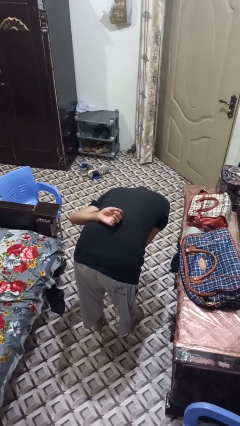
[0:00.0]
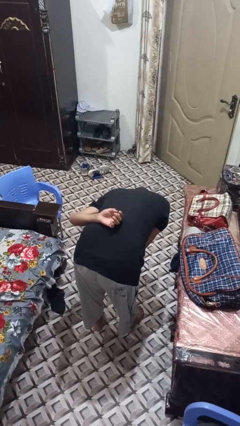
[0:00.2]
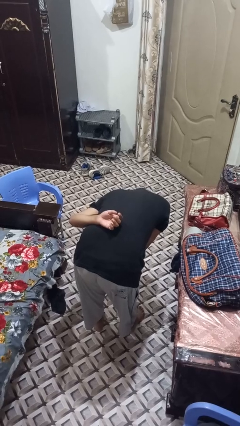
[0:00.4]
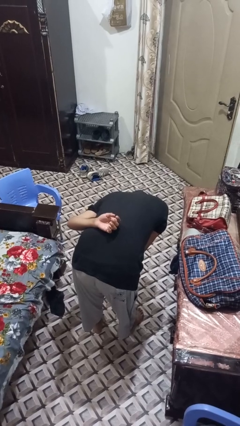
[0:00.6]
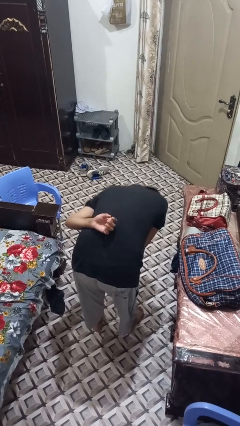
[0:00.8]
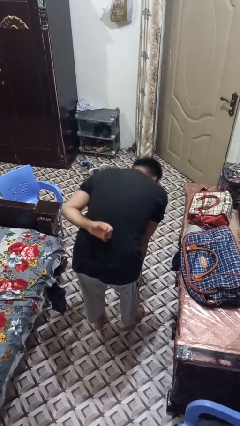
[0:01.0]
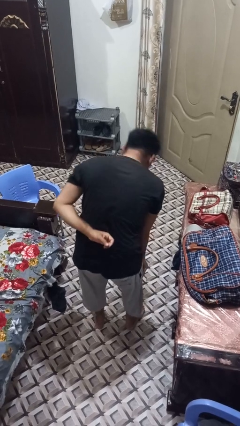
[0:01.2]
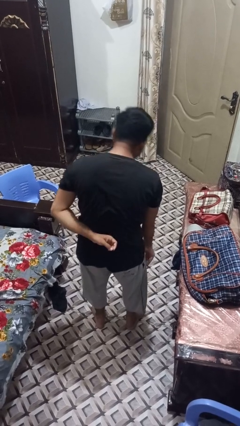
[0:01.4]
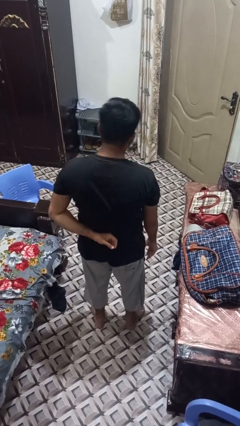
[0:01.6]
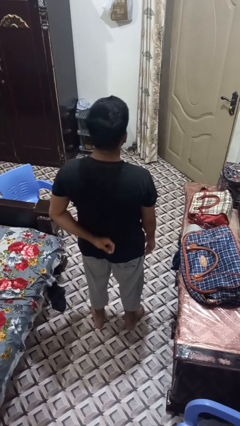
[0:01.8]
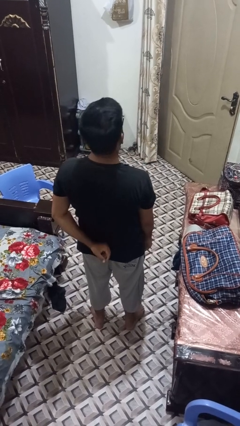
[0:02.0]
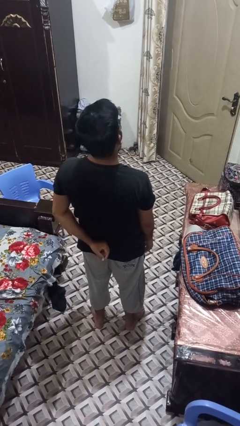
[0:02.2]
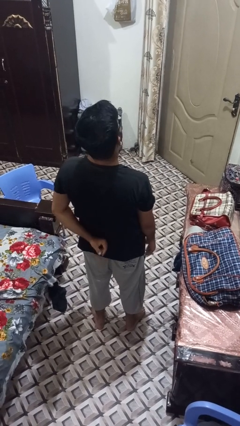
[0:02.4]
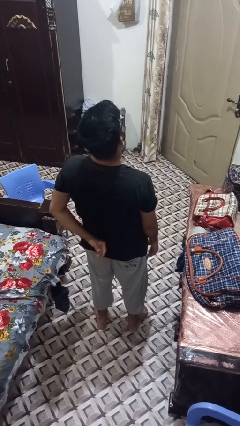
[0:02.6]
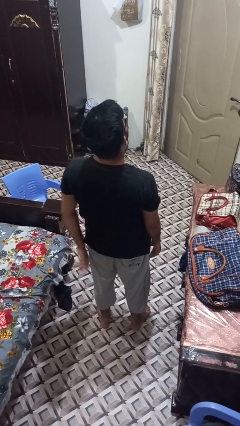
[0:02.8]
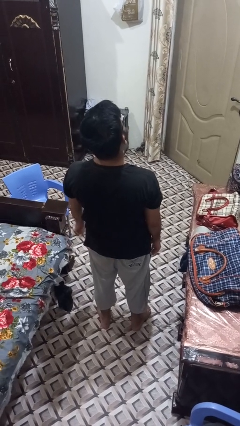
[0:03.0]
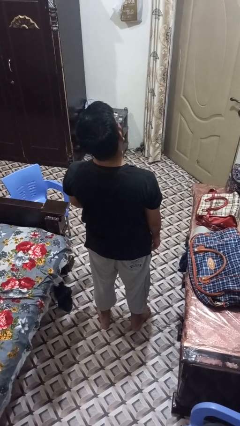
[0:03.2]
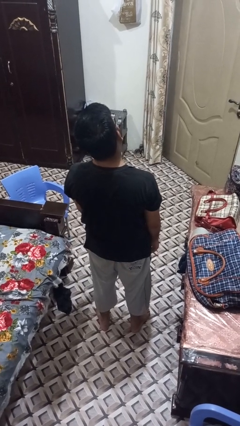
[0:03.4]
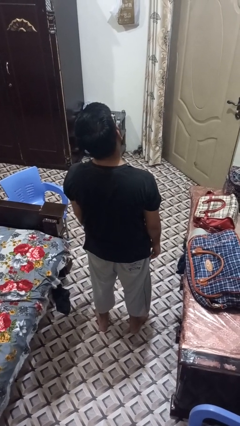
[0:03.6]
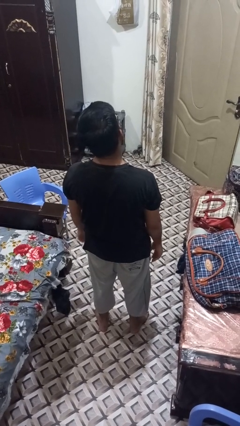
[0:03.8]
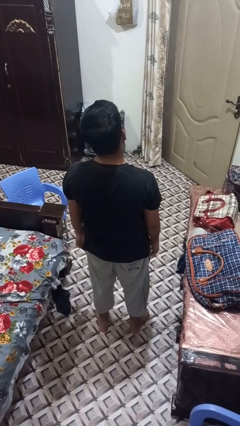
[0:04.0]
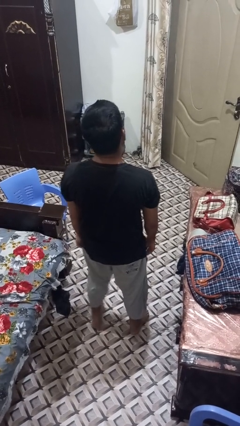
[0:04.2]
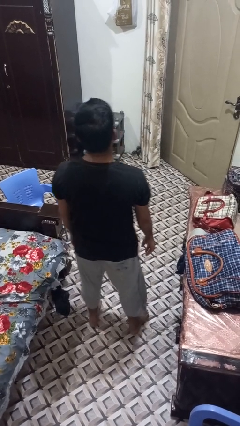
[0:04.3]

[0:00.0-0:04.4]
person stands up from floor

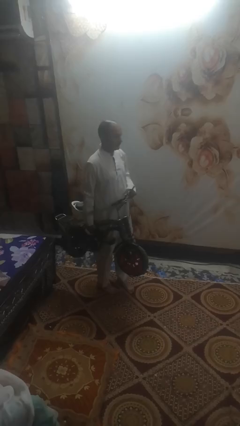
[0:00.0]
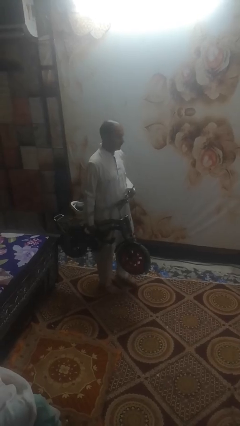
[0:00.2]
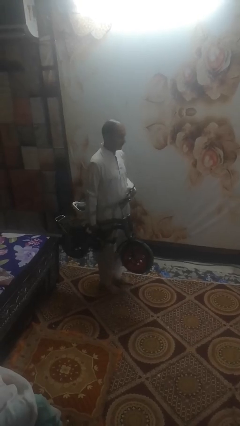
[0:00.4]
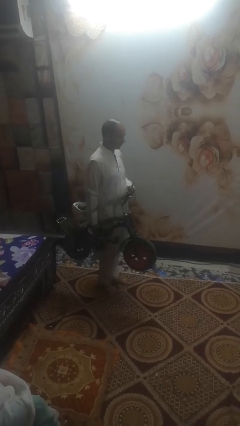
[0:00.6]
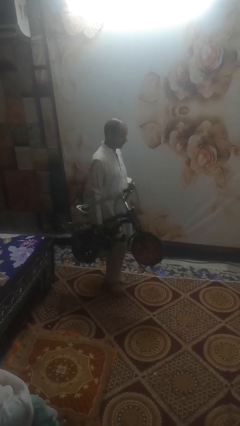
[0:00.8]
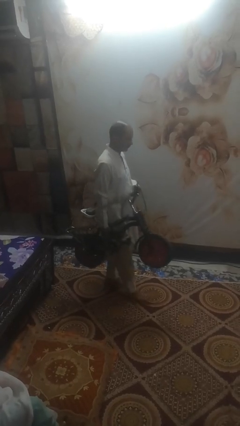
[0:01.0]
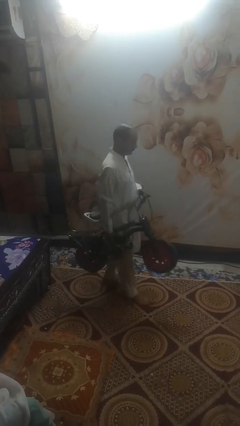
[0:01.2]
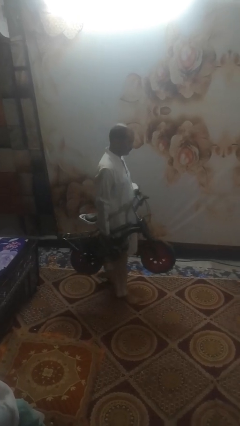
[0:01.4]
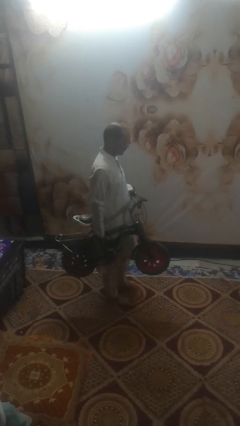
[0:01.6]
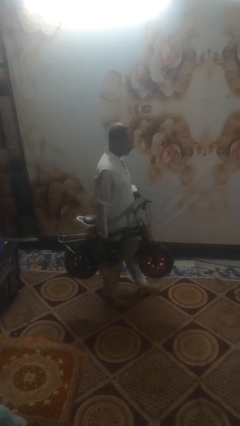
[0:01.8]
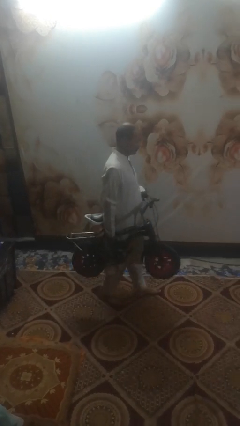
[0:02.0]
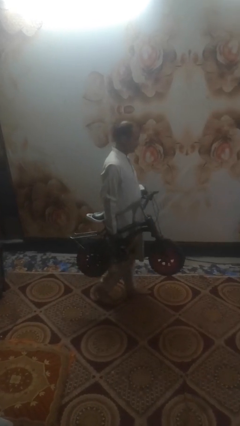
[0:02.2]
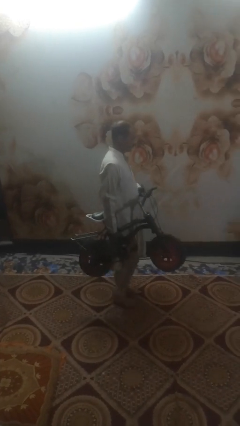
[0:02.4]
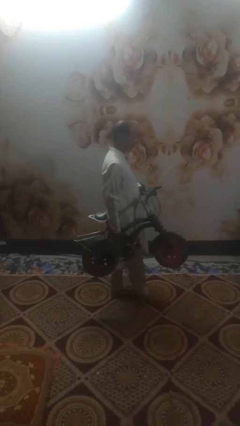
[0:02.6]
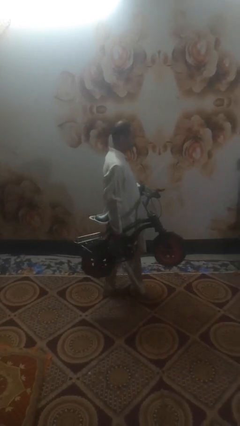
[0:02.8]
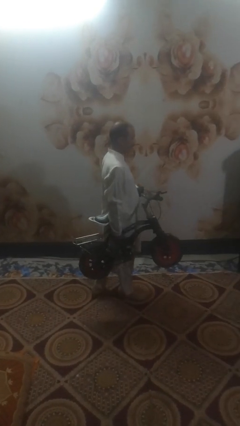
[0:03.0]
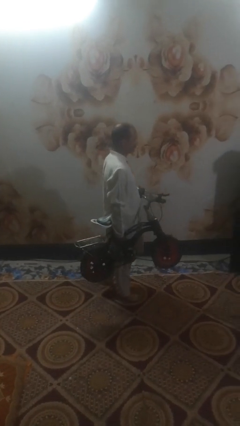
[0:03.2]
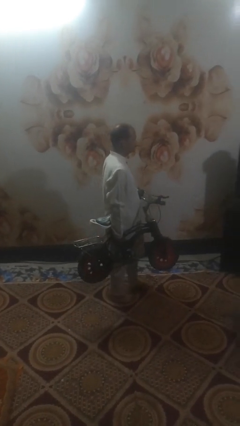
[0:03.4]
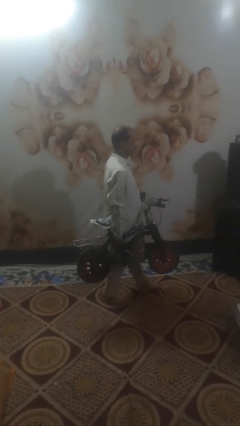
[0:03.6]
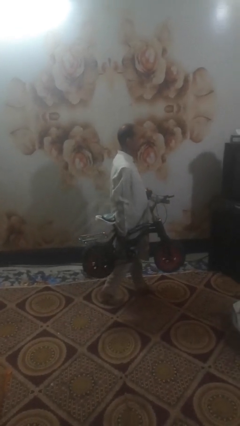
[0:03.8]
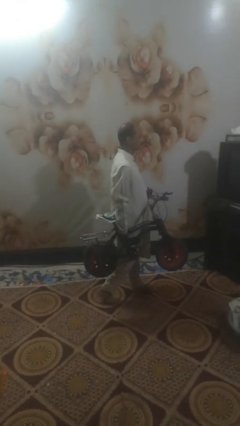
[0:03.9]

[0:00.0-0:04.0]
person carries bicycle

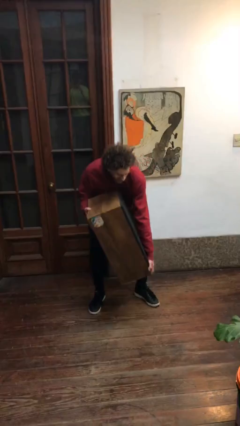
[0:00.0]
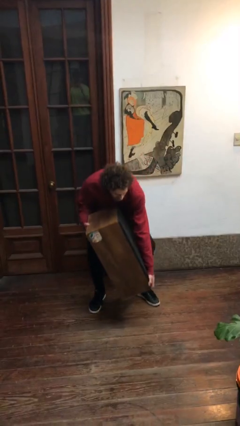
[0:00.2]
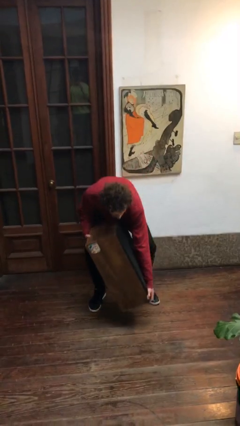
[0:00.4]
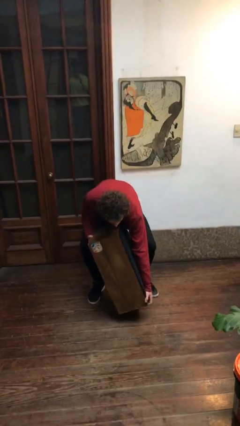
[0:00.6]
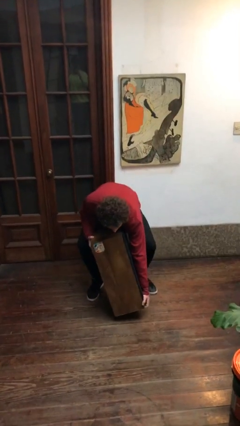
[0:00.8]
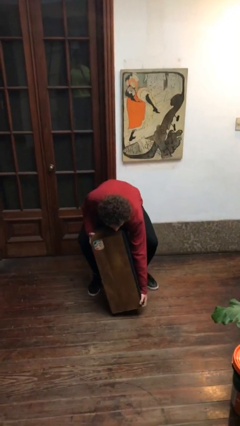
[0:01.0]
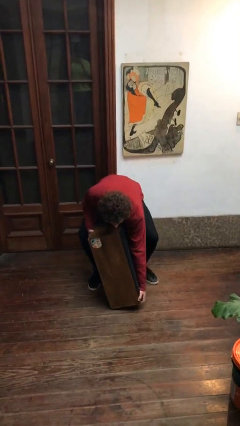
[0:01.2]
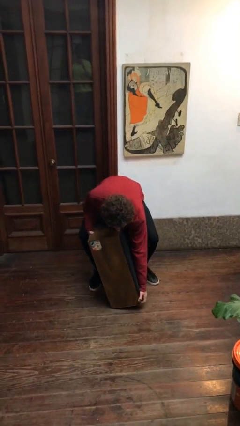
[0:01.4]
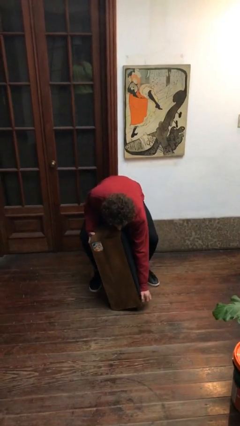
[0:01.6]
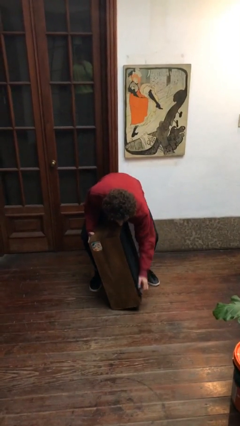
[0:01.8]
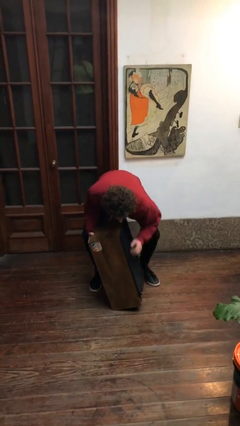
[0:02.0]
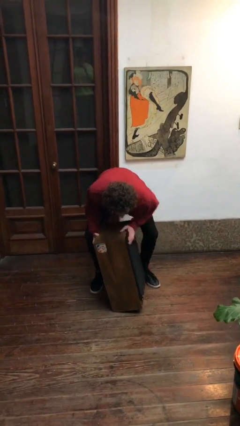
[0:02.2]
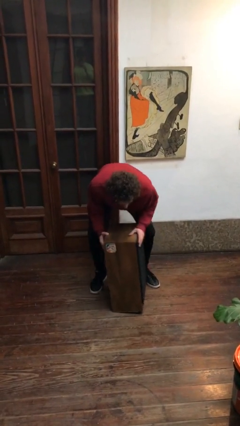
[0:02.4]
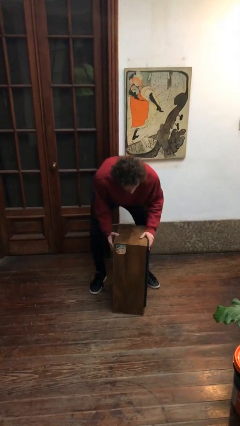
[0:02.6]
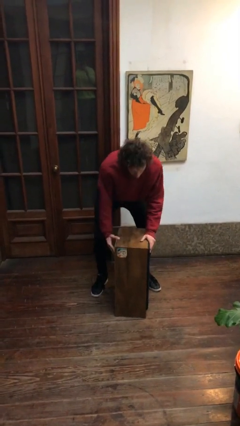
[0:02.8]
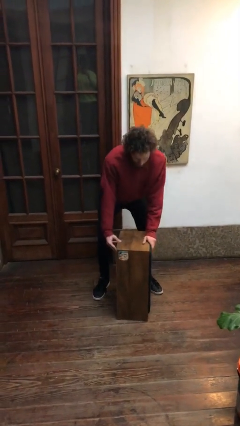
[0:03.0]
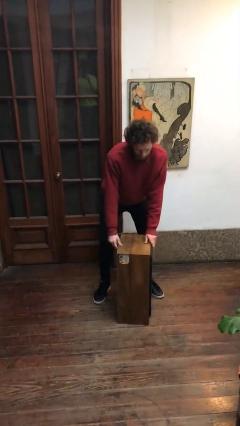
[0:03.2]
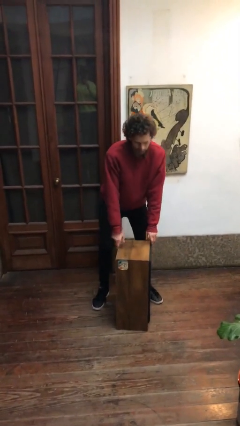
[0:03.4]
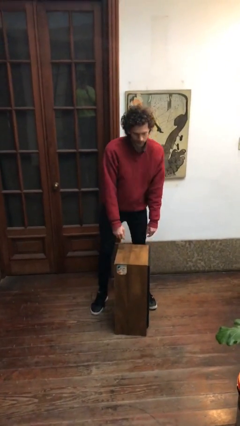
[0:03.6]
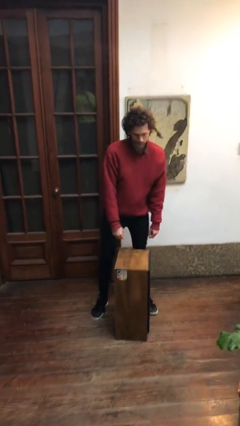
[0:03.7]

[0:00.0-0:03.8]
person puts down object on floor

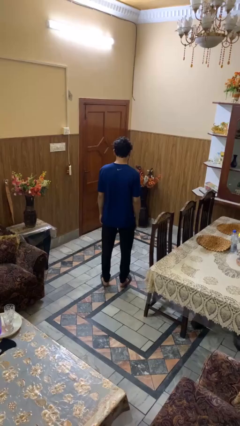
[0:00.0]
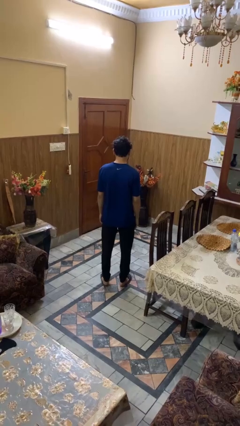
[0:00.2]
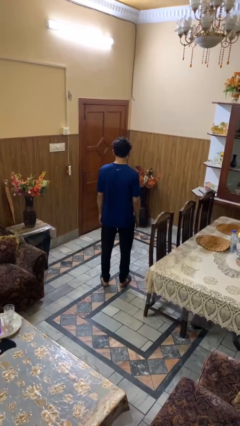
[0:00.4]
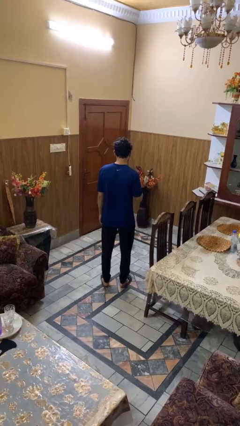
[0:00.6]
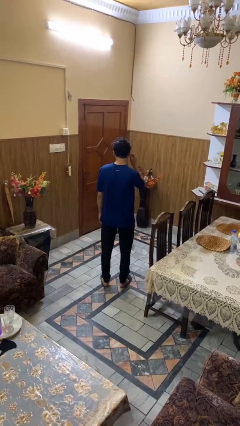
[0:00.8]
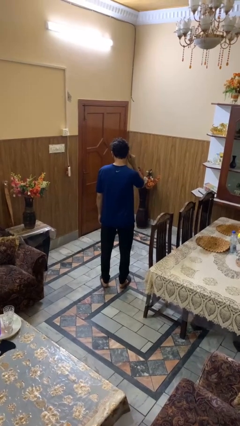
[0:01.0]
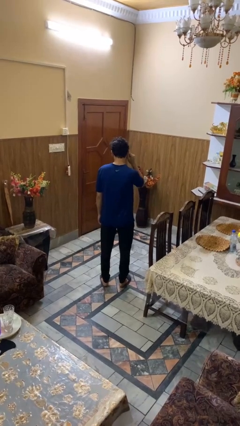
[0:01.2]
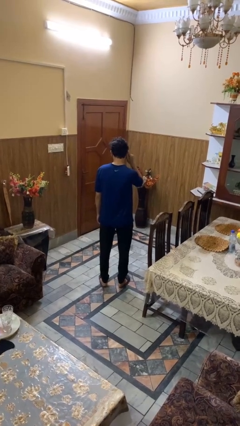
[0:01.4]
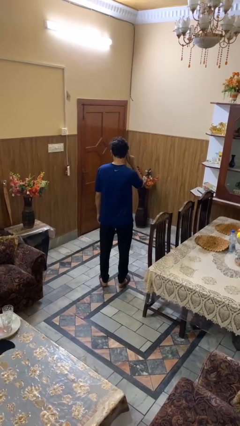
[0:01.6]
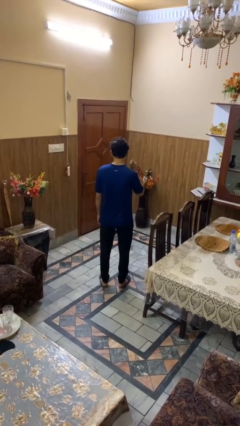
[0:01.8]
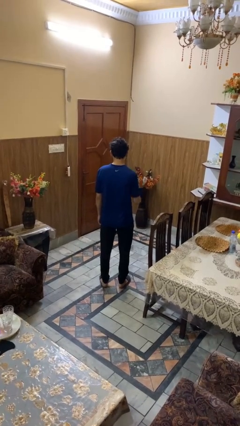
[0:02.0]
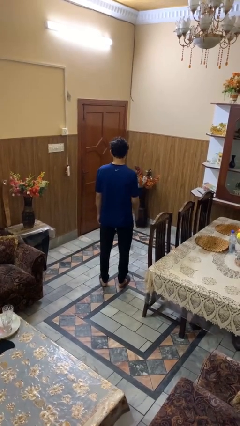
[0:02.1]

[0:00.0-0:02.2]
person touches earlobe

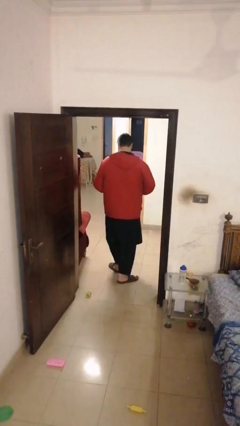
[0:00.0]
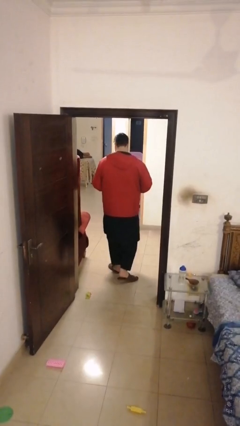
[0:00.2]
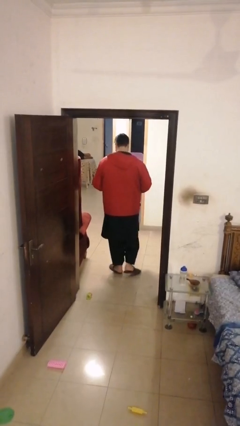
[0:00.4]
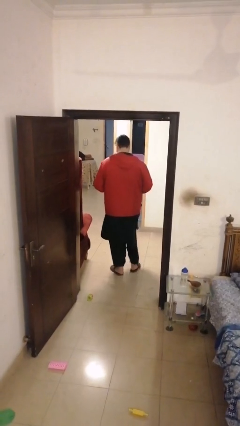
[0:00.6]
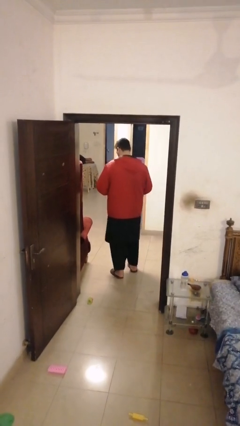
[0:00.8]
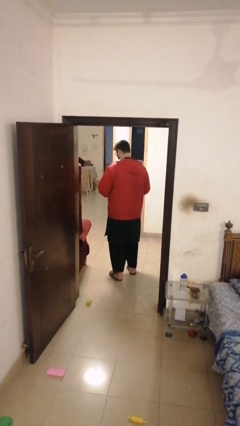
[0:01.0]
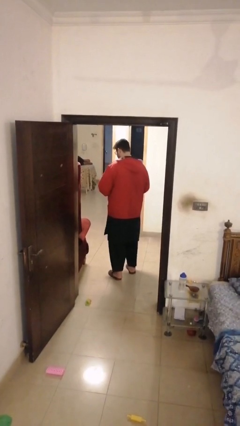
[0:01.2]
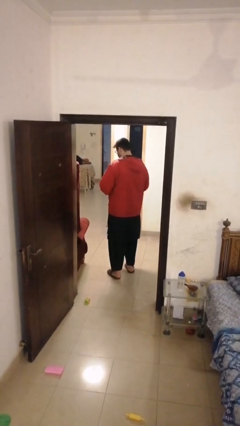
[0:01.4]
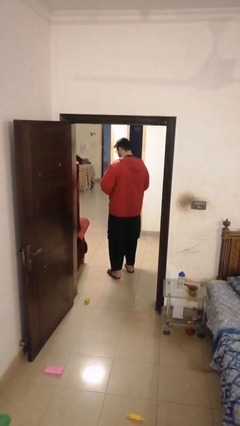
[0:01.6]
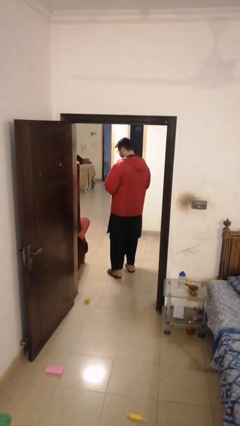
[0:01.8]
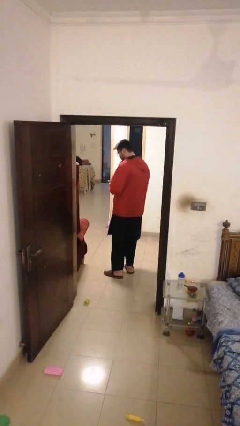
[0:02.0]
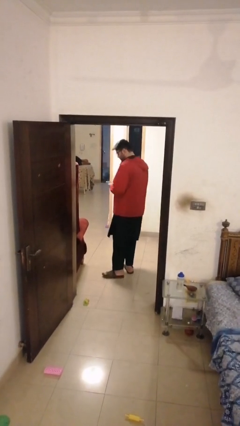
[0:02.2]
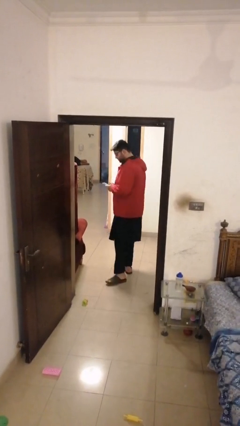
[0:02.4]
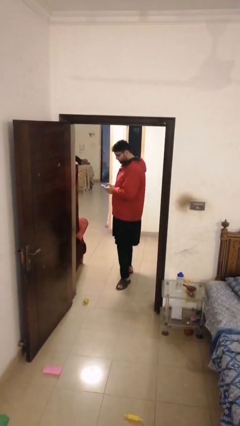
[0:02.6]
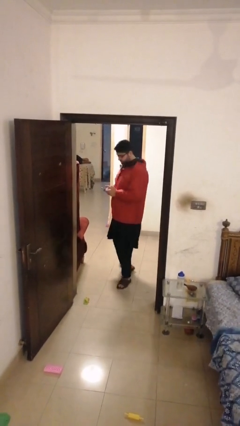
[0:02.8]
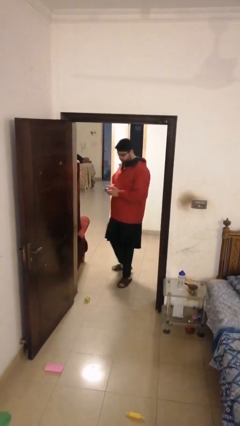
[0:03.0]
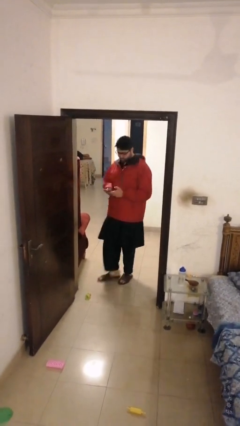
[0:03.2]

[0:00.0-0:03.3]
person exits scene through structure

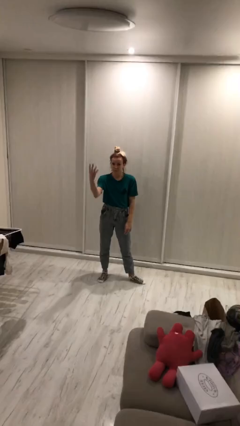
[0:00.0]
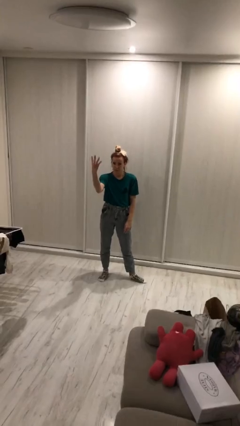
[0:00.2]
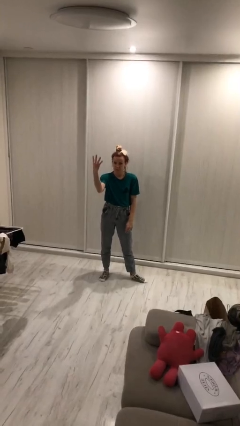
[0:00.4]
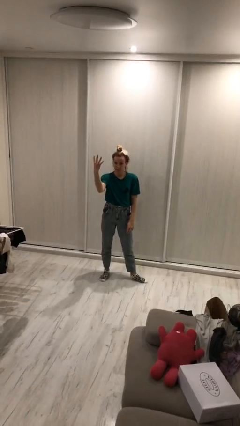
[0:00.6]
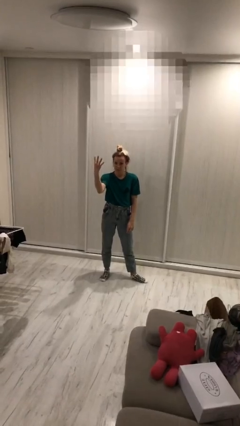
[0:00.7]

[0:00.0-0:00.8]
person gestures number four
